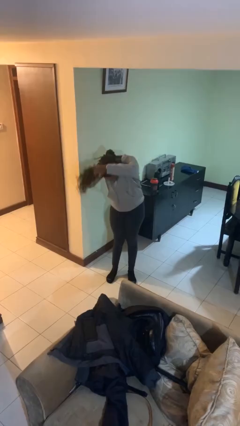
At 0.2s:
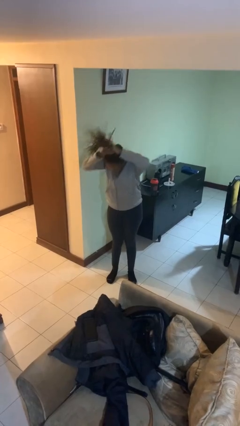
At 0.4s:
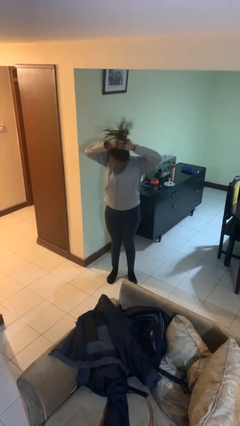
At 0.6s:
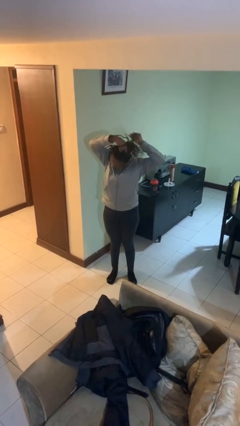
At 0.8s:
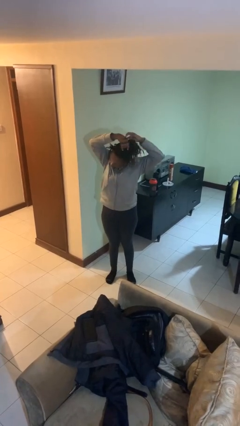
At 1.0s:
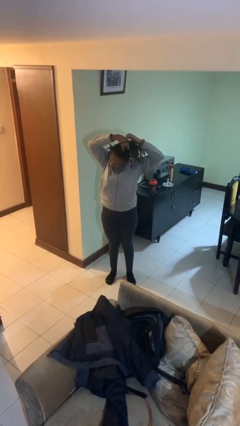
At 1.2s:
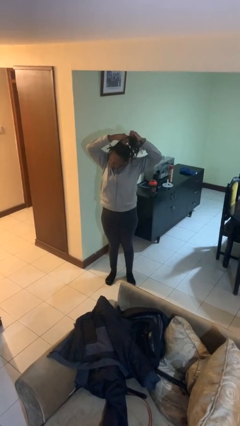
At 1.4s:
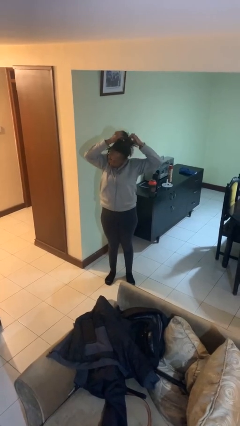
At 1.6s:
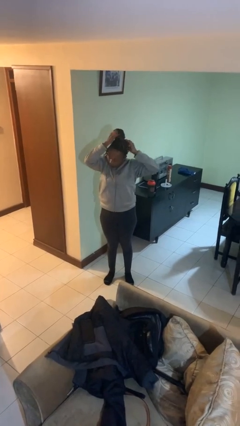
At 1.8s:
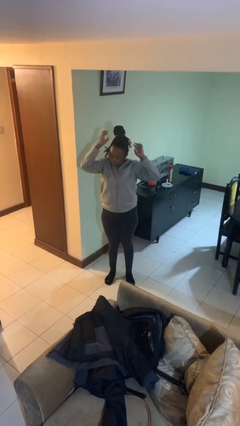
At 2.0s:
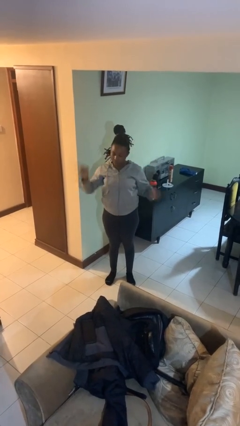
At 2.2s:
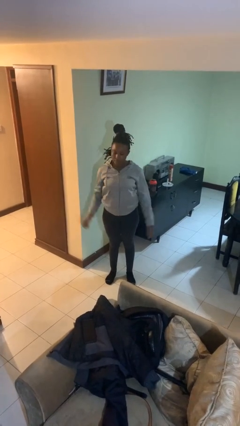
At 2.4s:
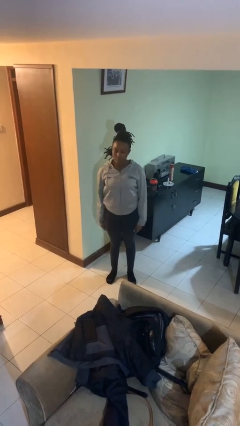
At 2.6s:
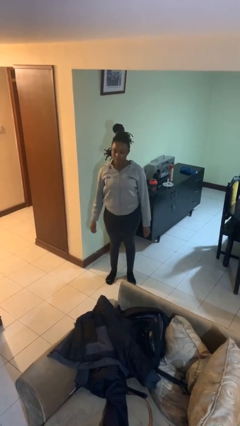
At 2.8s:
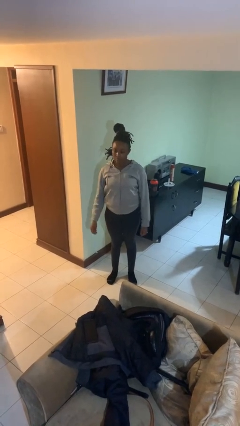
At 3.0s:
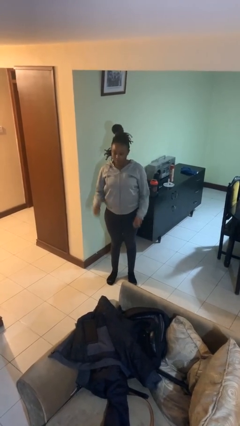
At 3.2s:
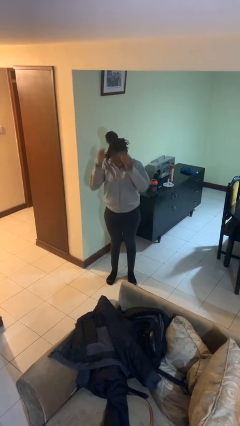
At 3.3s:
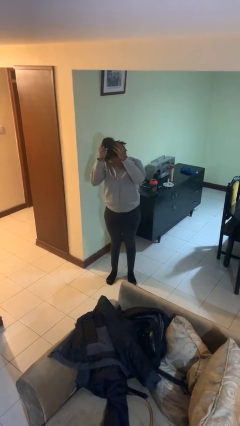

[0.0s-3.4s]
person puts hair in ponytail

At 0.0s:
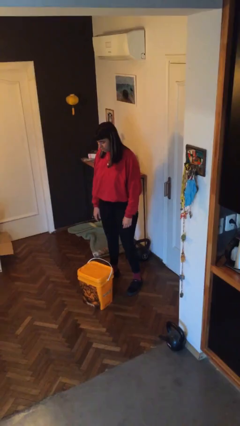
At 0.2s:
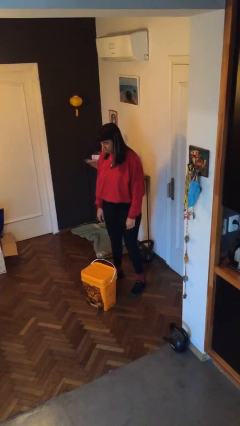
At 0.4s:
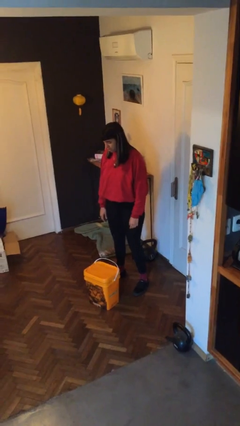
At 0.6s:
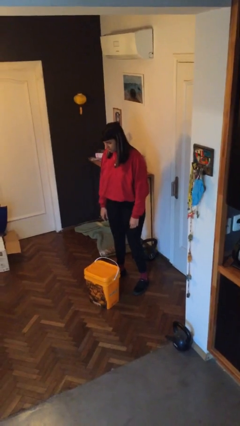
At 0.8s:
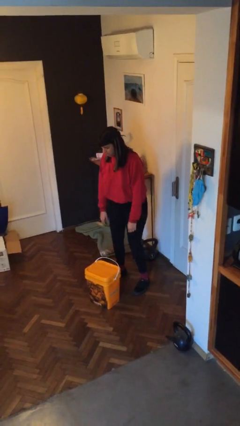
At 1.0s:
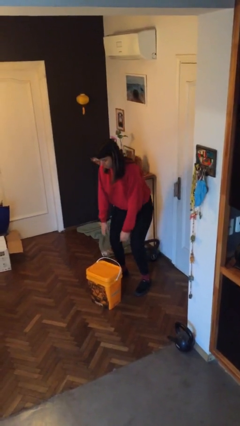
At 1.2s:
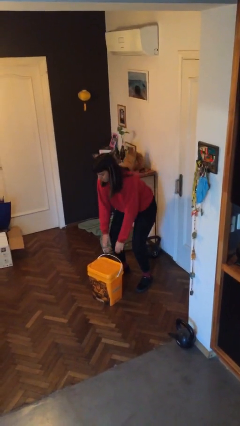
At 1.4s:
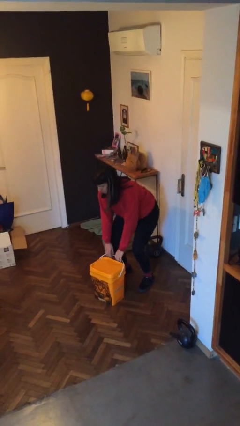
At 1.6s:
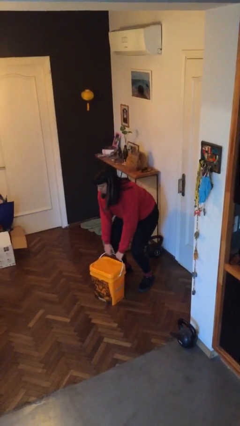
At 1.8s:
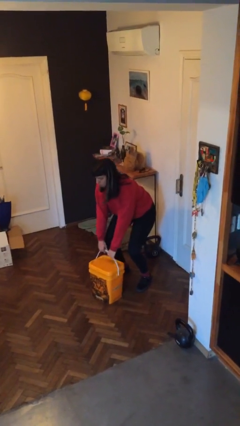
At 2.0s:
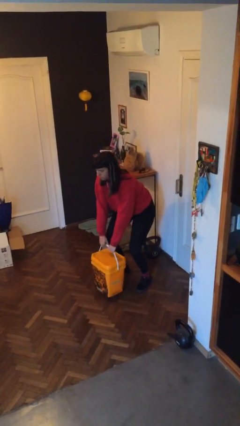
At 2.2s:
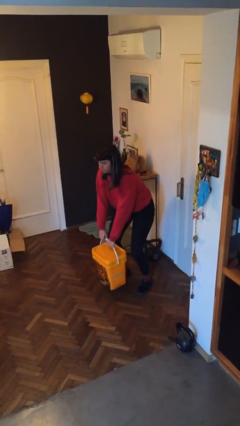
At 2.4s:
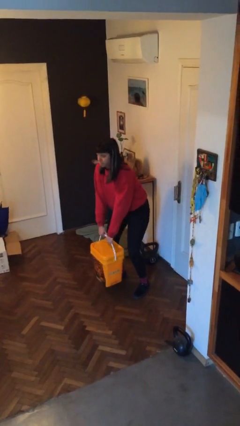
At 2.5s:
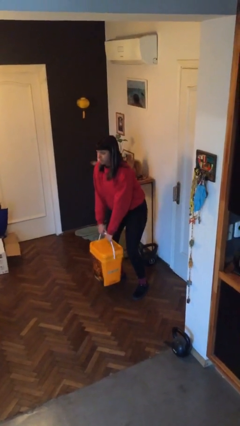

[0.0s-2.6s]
person picks up object from floor

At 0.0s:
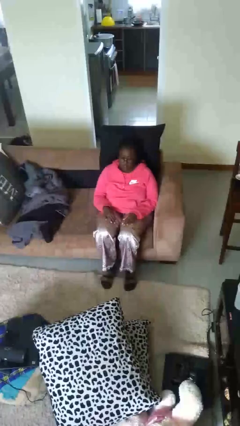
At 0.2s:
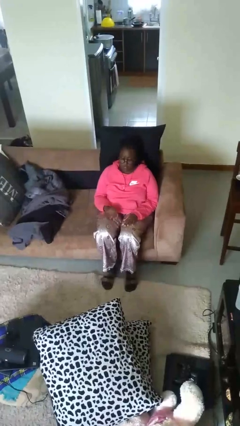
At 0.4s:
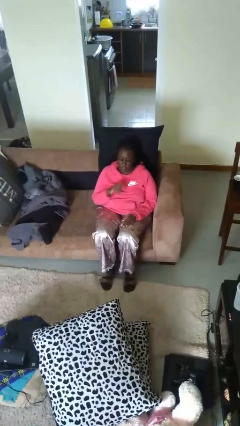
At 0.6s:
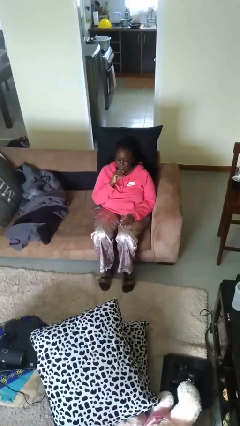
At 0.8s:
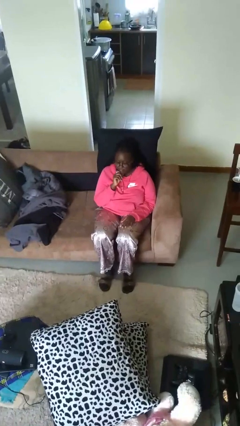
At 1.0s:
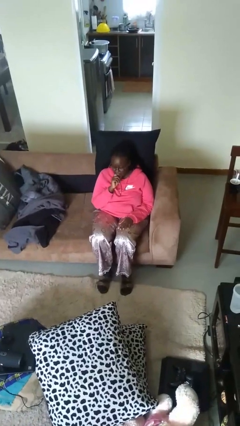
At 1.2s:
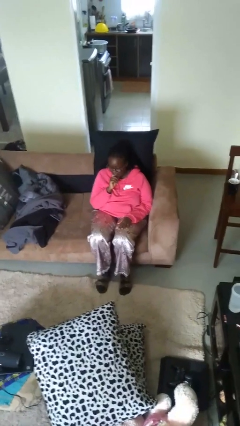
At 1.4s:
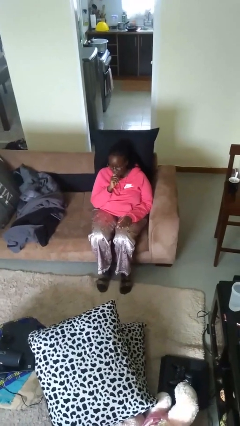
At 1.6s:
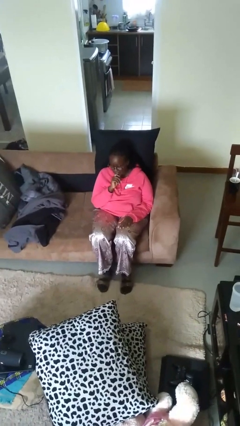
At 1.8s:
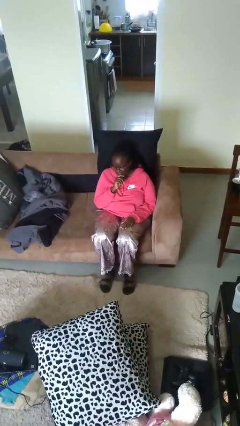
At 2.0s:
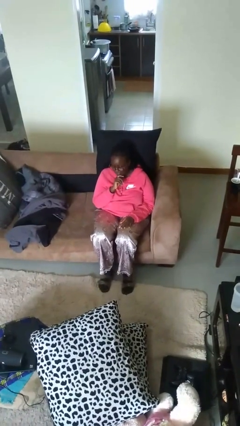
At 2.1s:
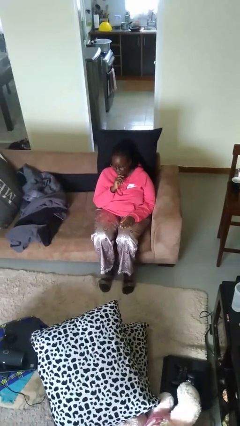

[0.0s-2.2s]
person strokes chin

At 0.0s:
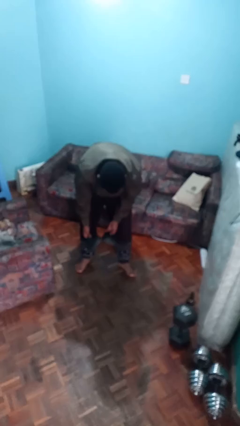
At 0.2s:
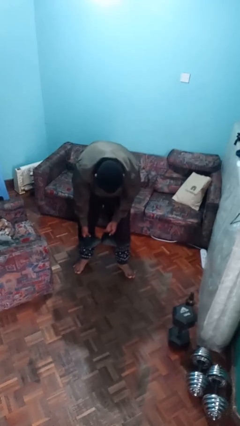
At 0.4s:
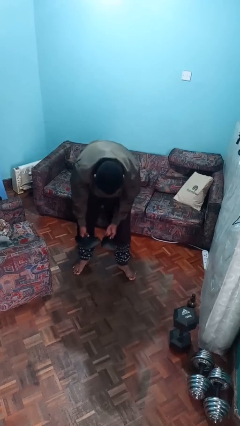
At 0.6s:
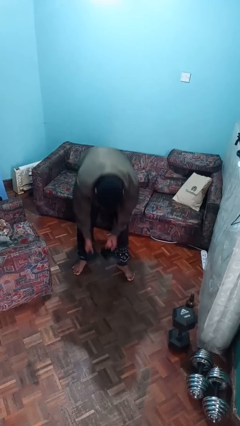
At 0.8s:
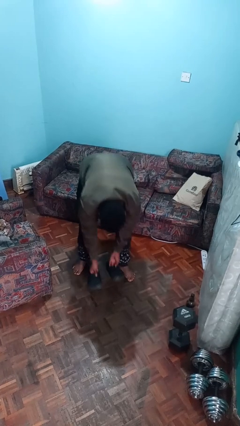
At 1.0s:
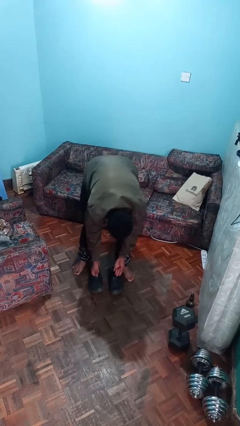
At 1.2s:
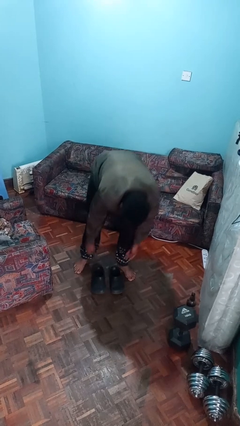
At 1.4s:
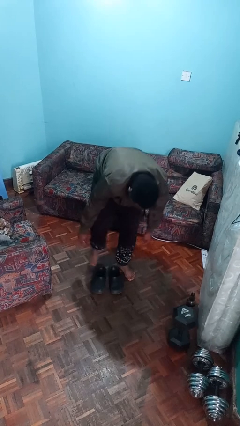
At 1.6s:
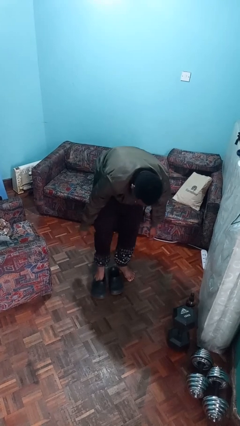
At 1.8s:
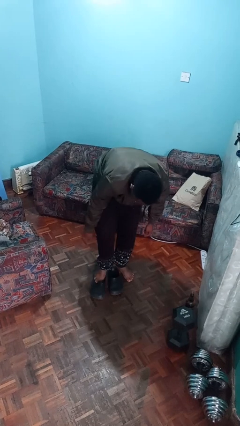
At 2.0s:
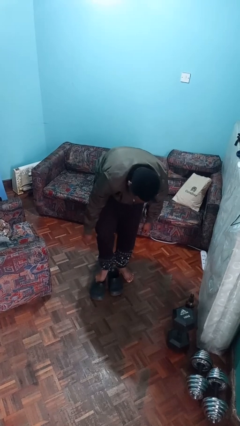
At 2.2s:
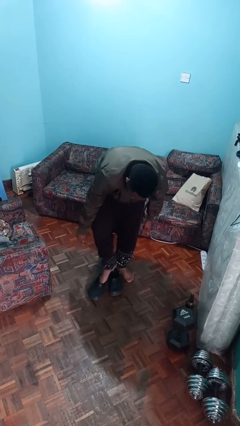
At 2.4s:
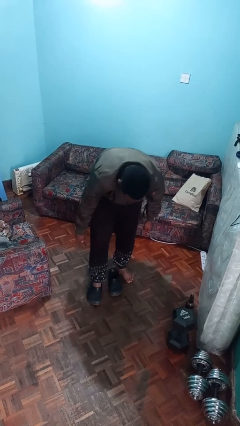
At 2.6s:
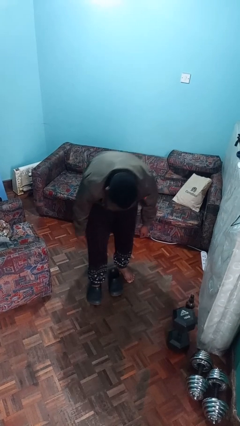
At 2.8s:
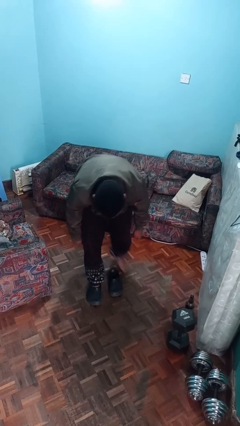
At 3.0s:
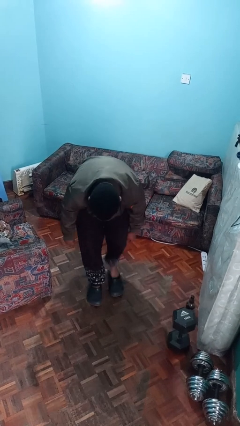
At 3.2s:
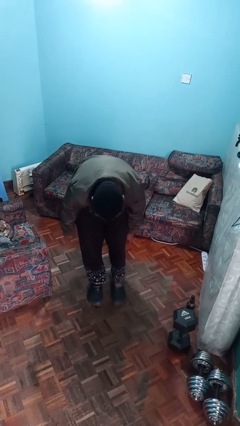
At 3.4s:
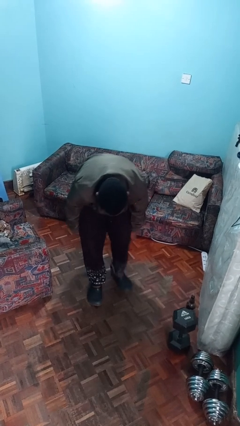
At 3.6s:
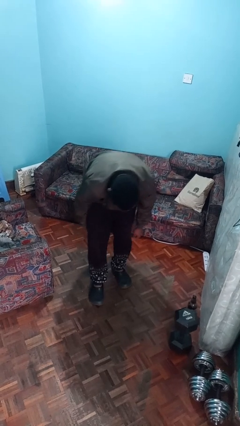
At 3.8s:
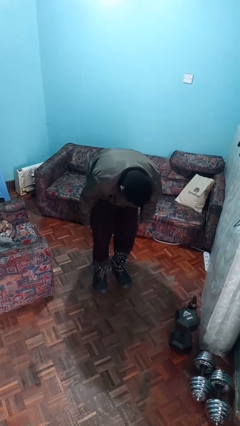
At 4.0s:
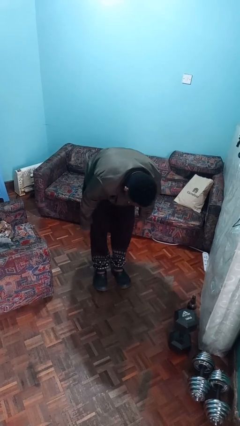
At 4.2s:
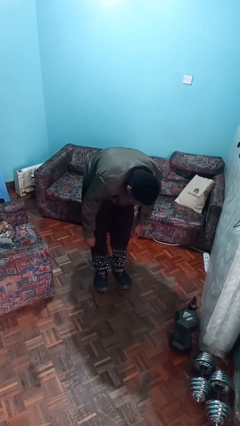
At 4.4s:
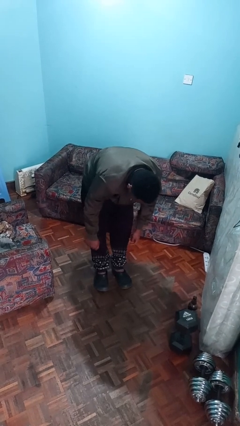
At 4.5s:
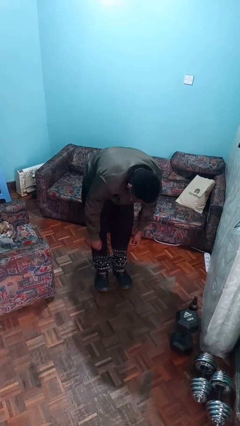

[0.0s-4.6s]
person puts on shoes

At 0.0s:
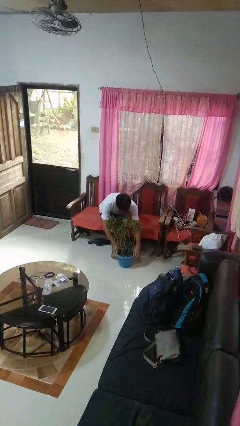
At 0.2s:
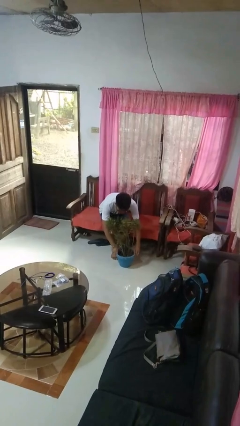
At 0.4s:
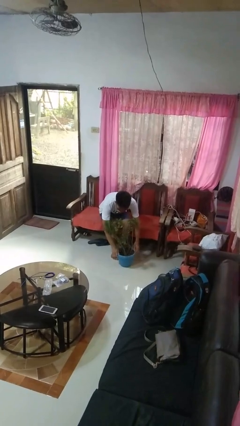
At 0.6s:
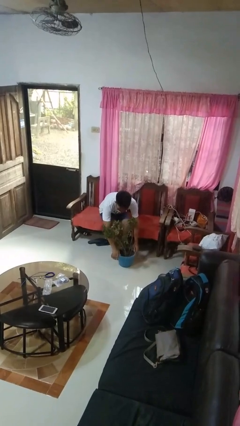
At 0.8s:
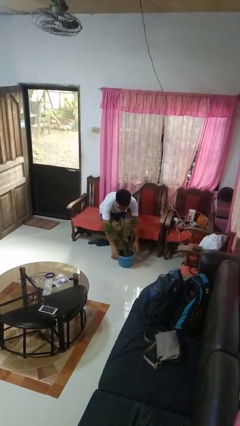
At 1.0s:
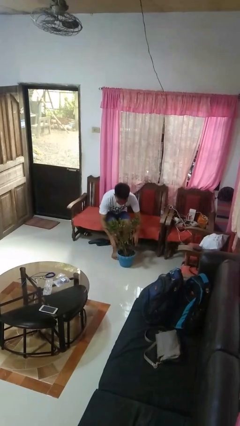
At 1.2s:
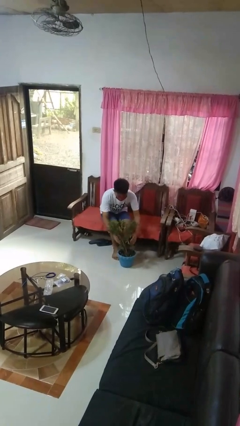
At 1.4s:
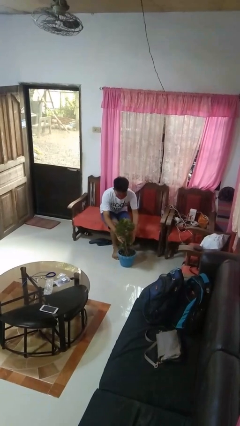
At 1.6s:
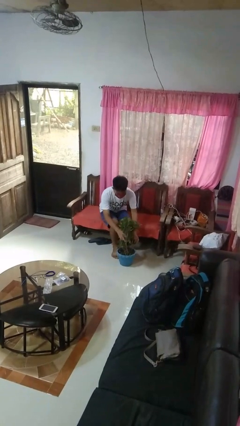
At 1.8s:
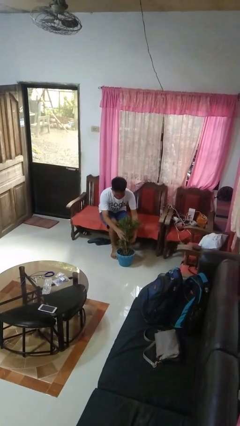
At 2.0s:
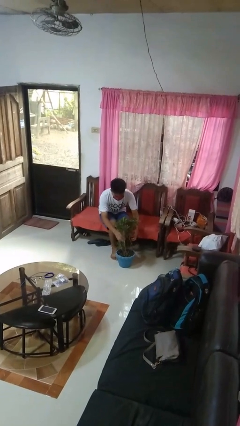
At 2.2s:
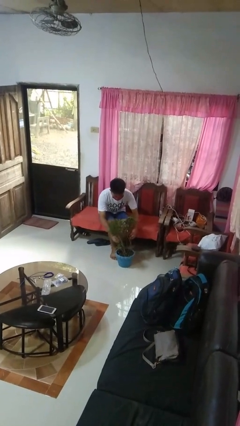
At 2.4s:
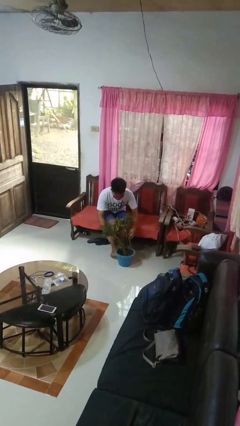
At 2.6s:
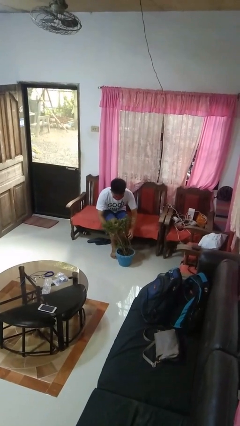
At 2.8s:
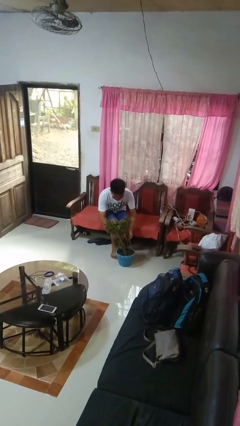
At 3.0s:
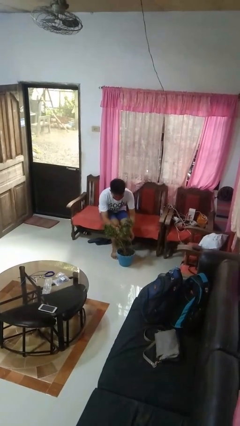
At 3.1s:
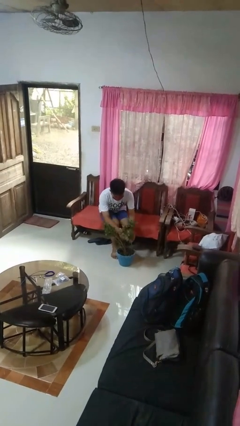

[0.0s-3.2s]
person arranges flowers in vase

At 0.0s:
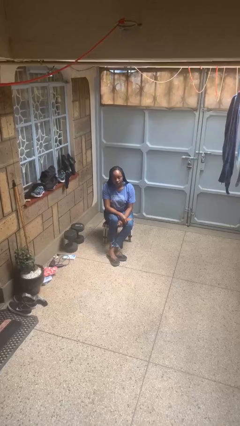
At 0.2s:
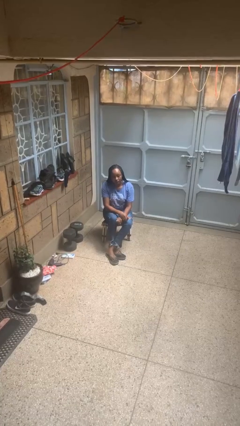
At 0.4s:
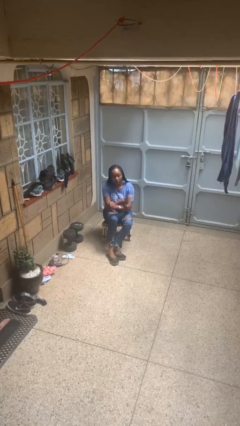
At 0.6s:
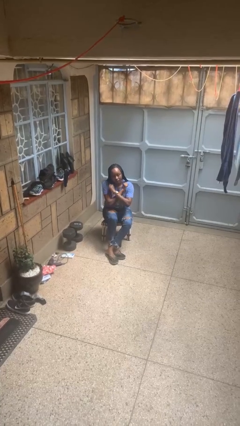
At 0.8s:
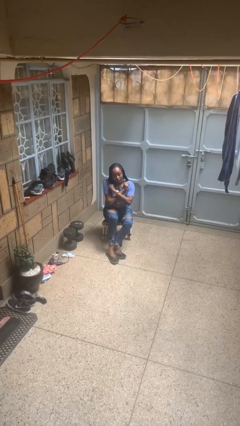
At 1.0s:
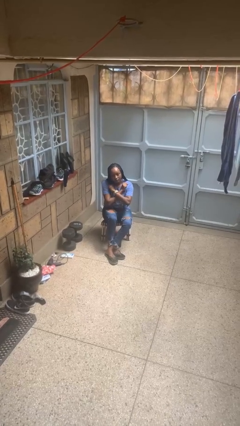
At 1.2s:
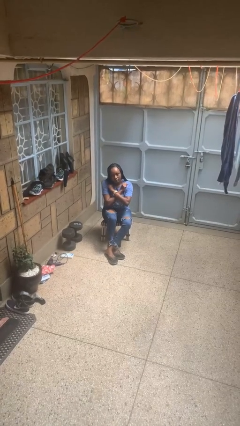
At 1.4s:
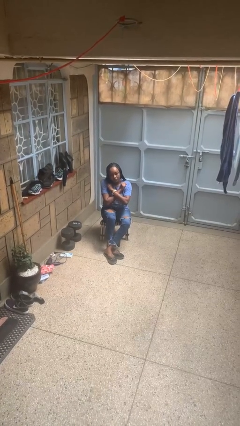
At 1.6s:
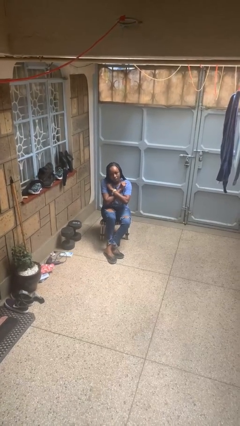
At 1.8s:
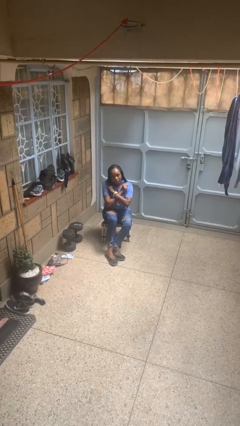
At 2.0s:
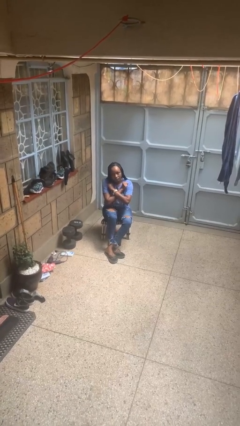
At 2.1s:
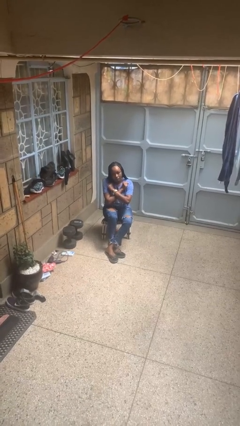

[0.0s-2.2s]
person gestures arms x
